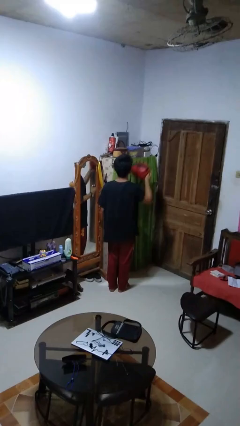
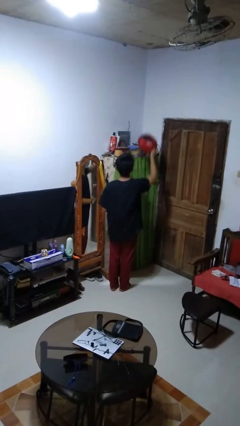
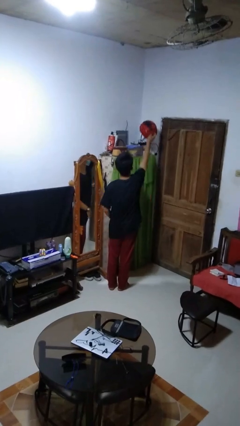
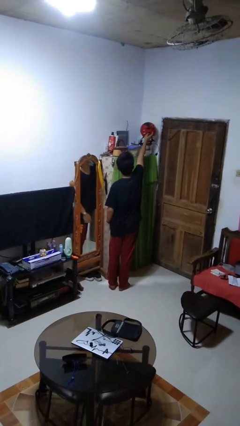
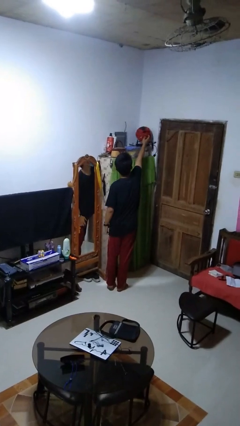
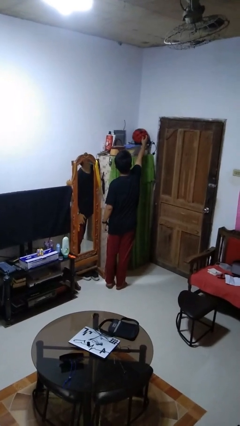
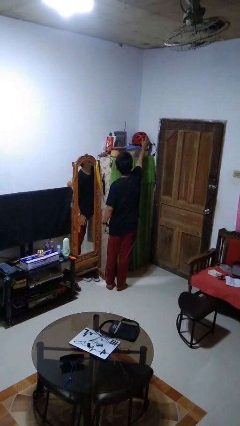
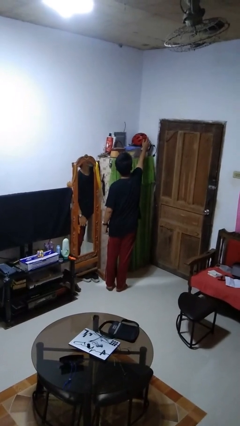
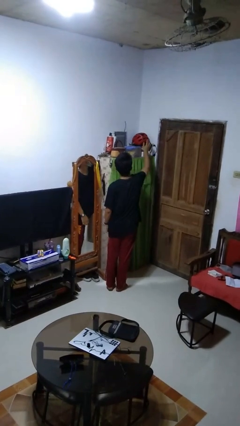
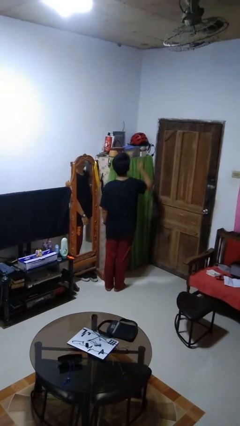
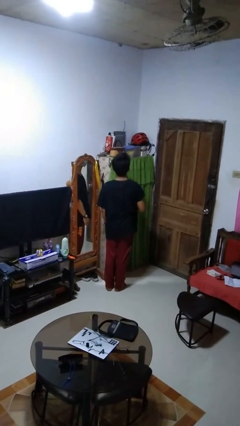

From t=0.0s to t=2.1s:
person puts down object on shelf

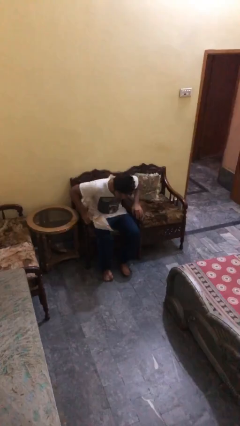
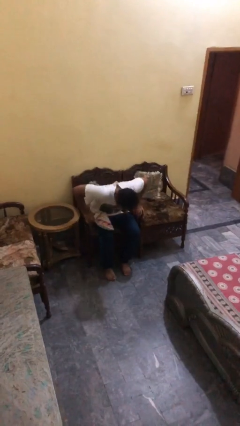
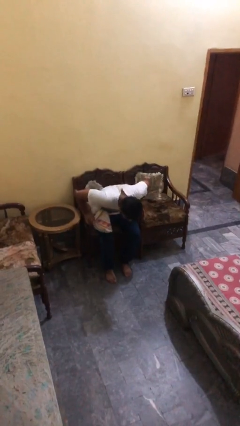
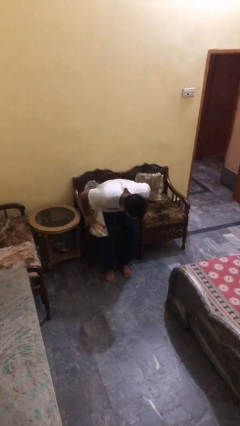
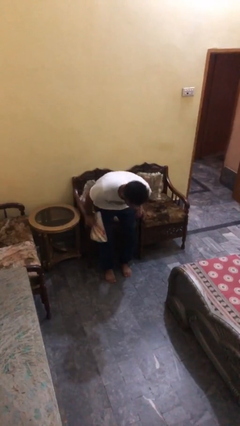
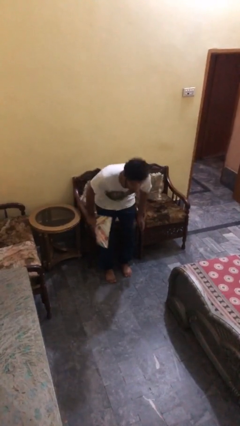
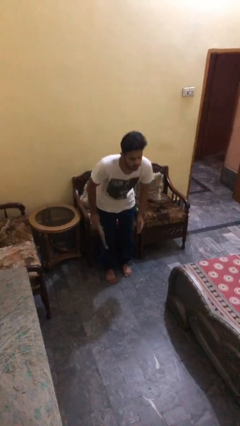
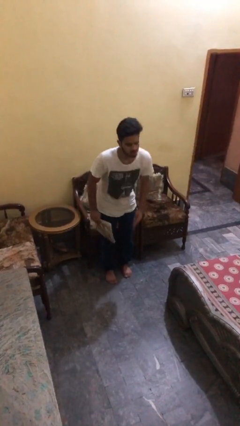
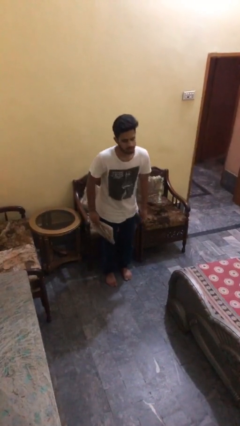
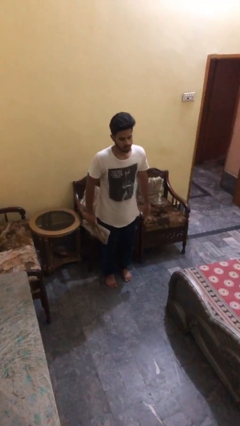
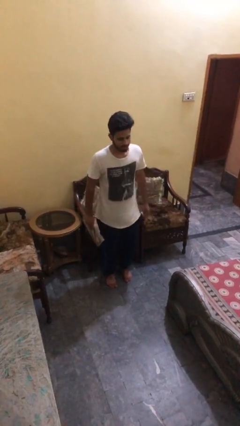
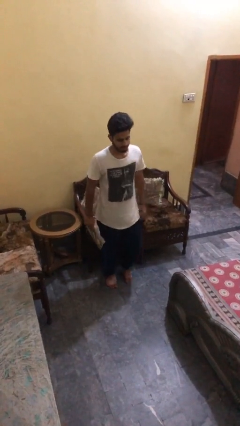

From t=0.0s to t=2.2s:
person stands up

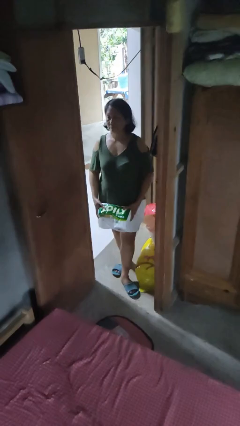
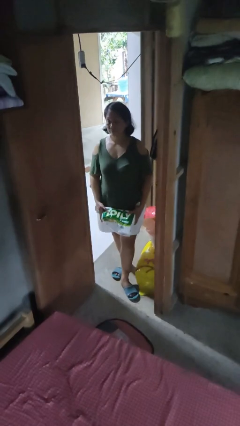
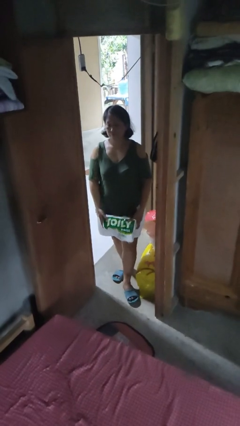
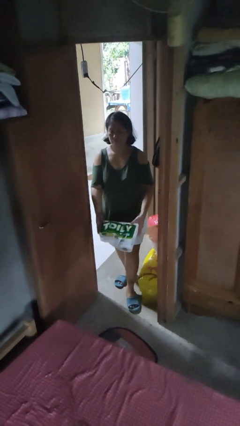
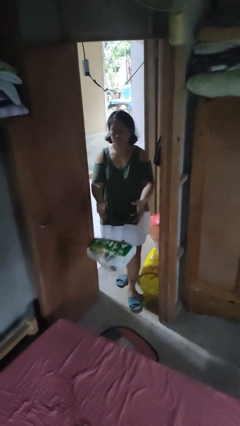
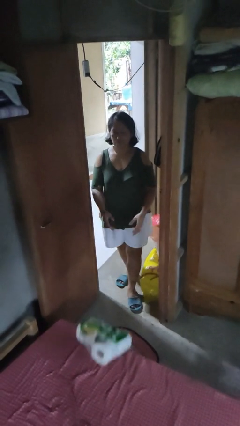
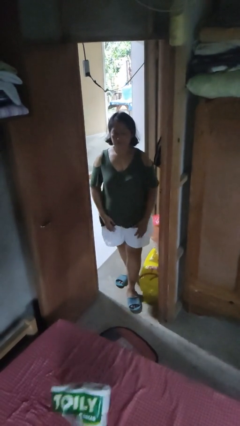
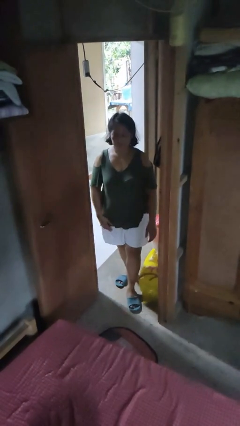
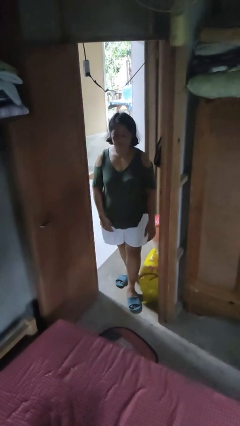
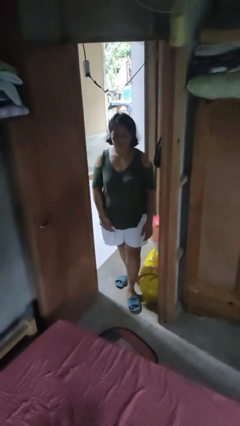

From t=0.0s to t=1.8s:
person throws object on bed

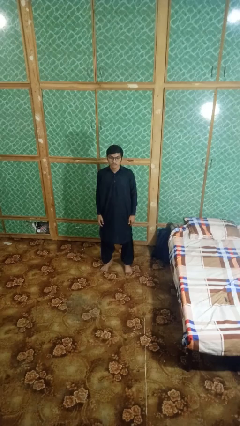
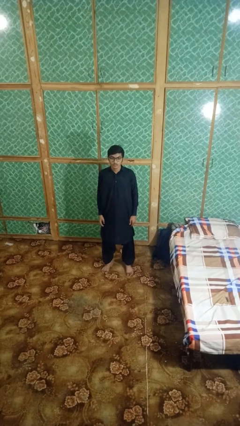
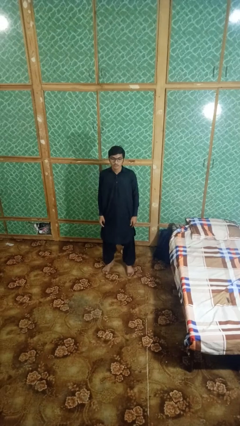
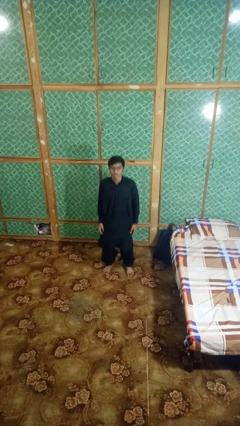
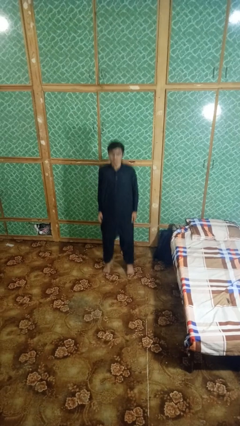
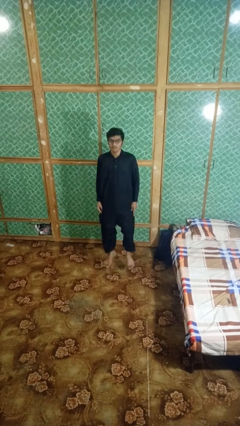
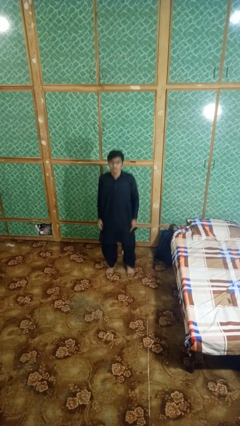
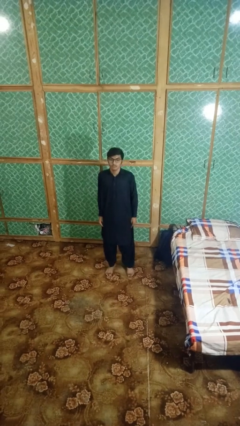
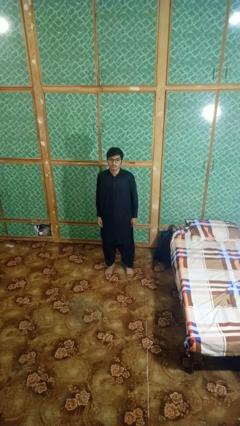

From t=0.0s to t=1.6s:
person jumps

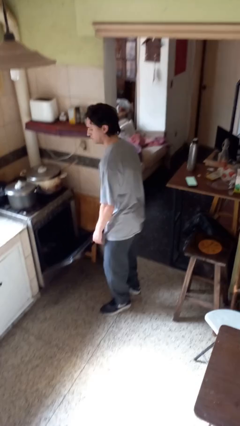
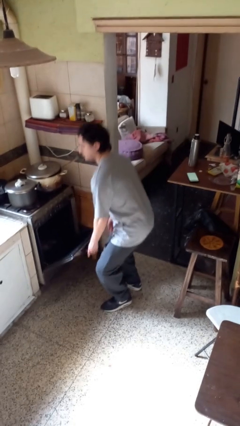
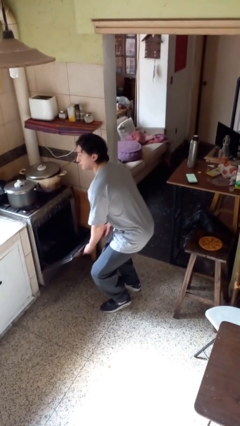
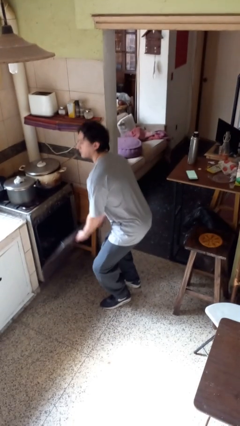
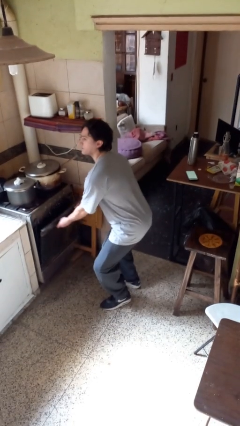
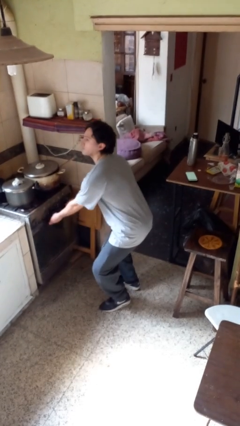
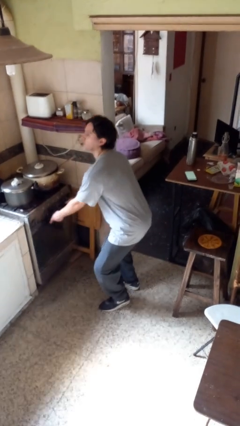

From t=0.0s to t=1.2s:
person closes oven door

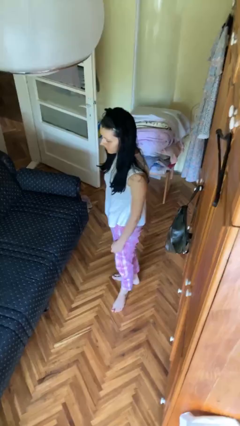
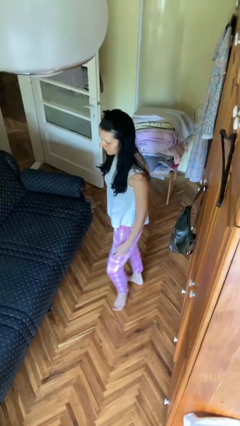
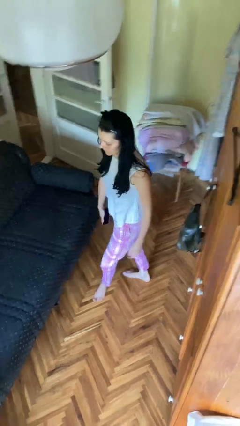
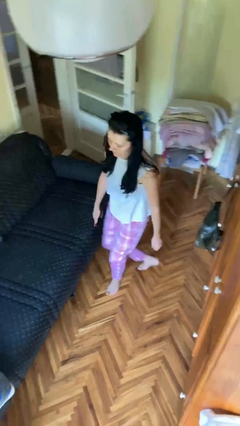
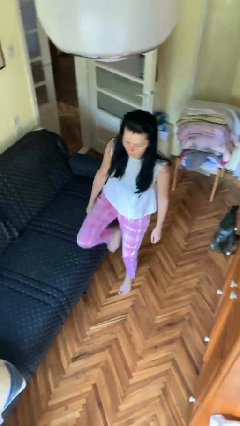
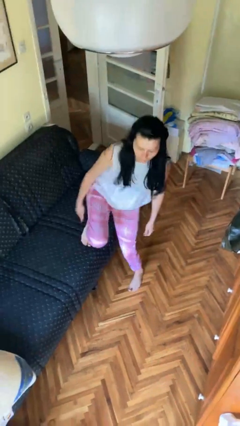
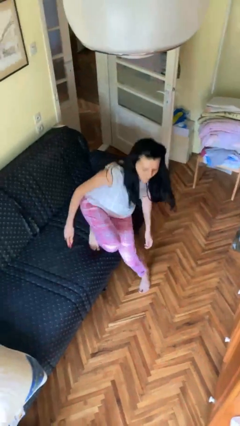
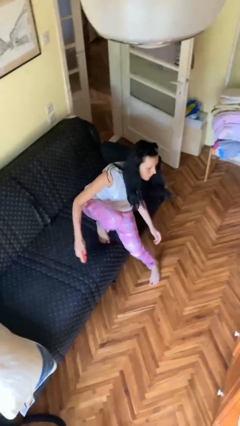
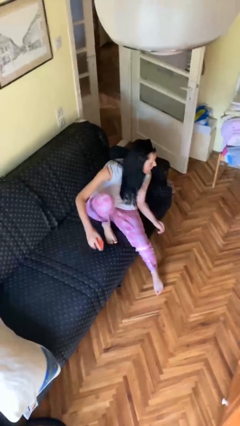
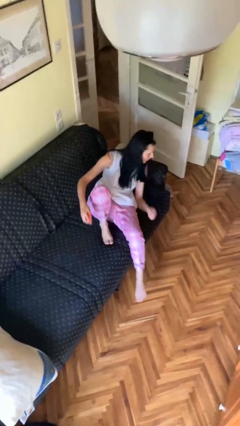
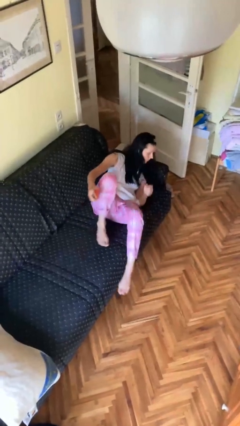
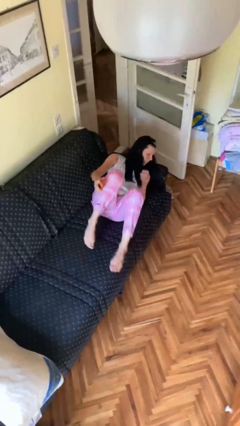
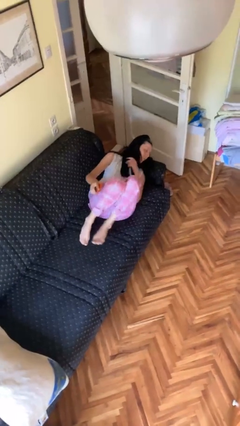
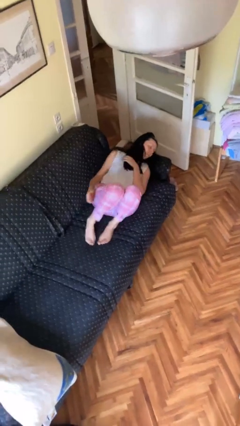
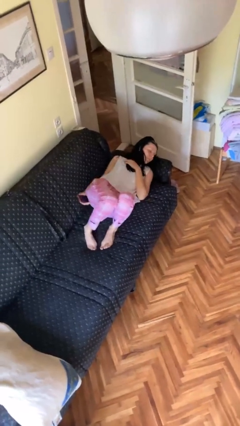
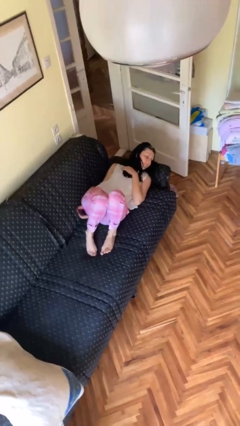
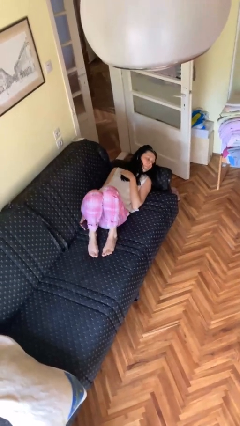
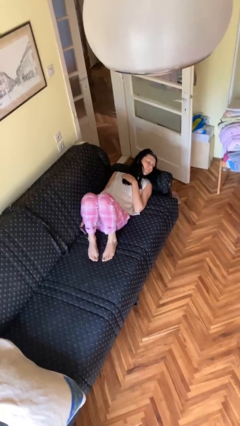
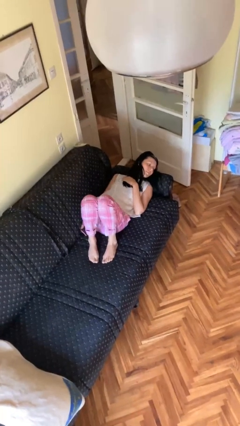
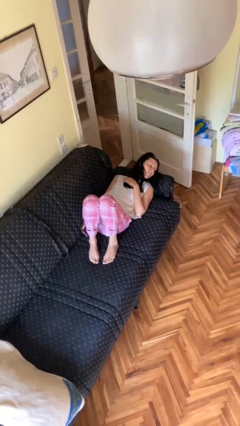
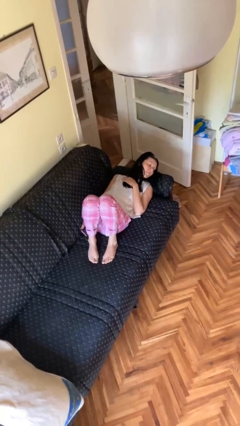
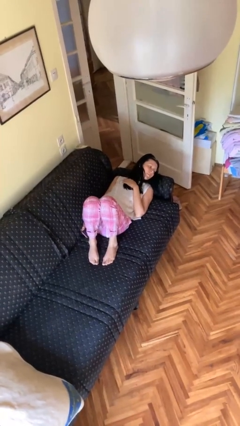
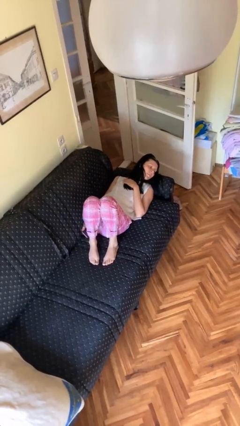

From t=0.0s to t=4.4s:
person lies down on couch

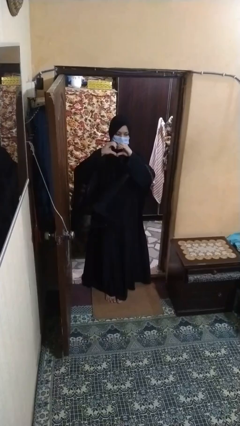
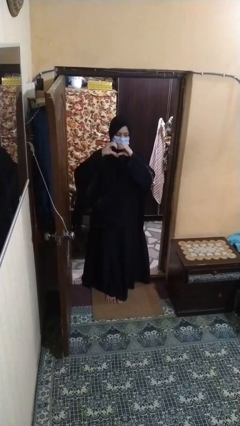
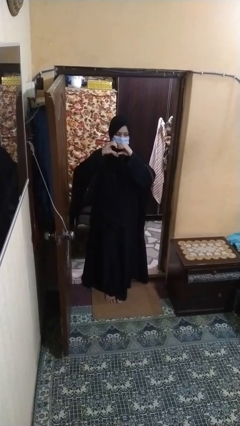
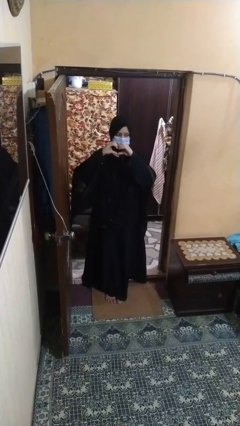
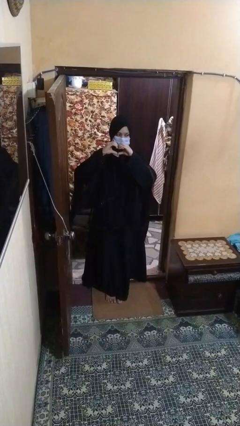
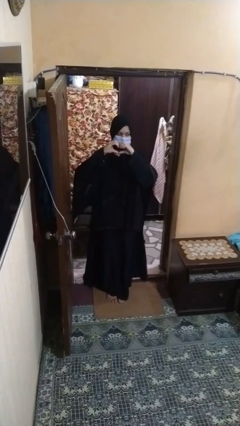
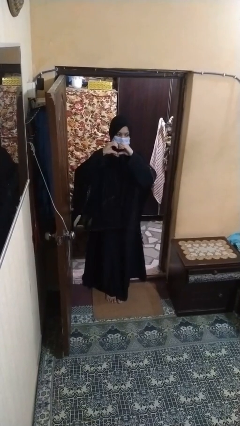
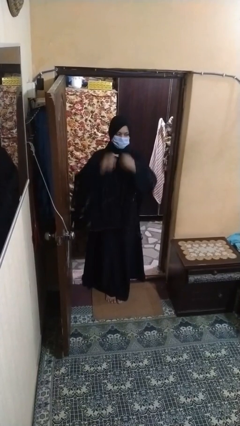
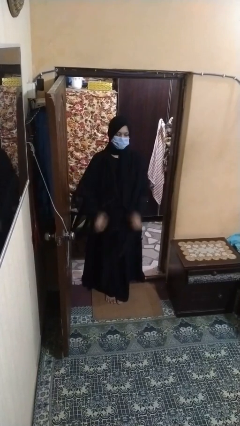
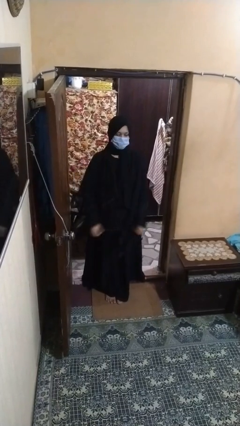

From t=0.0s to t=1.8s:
person gestures heart

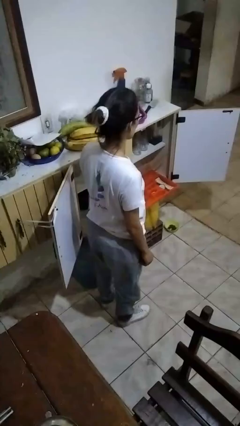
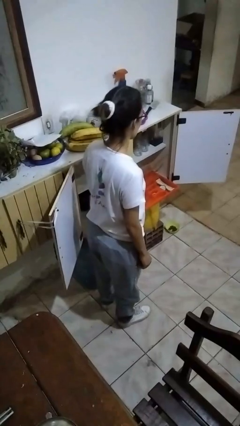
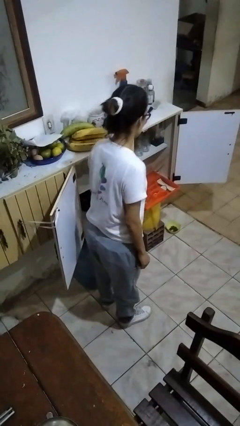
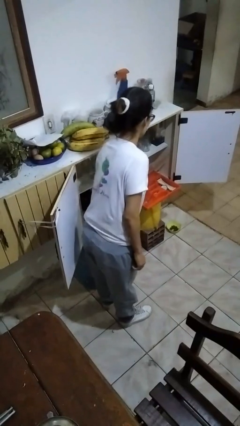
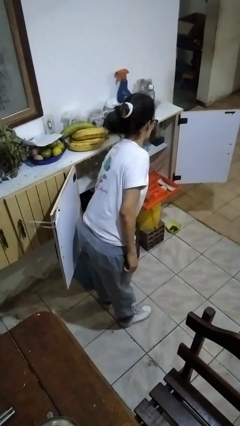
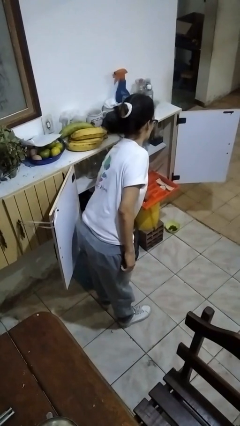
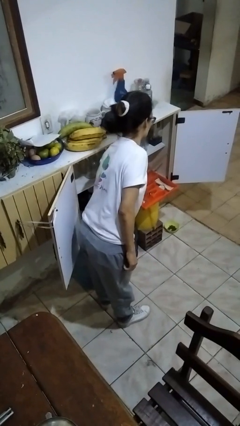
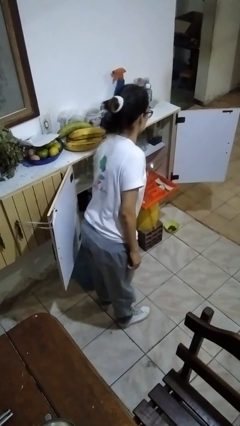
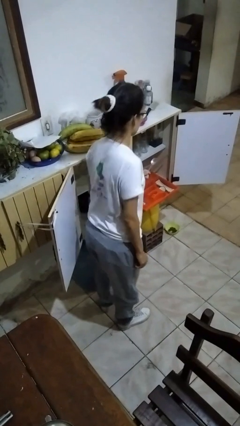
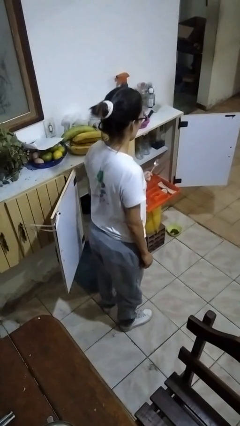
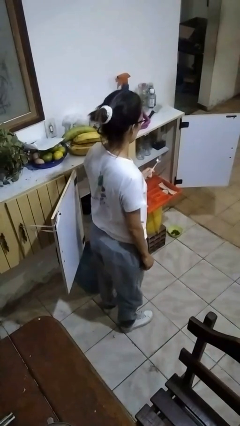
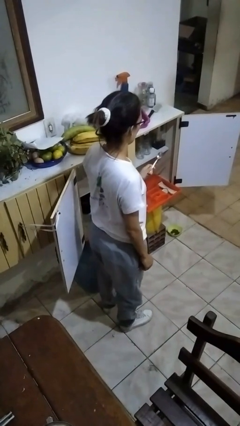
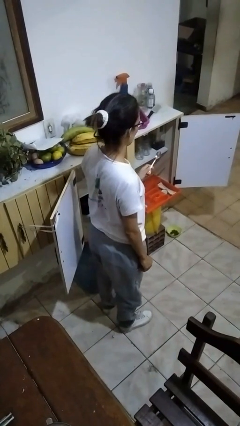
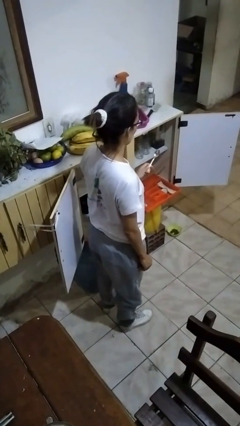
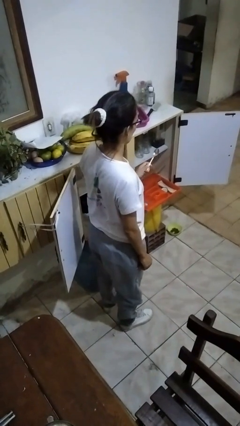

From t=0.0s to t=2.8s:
person takes object from kitchen drawer
